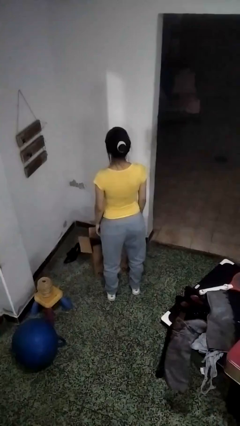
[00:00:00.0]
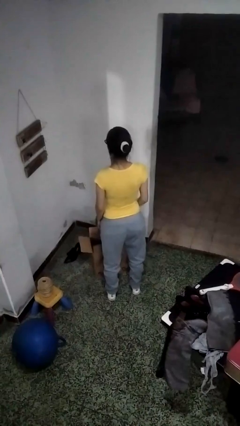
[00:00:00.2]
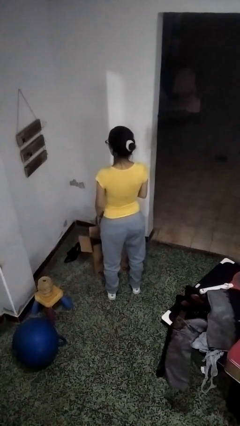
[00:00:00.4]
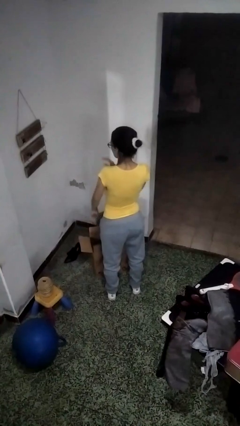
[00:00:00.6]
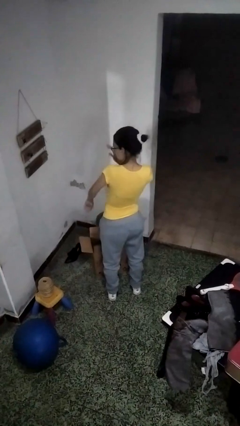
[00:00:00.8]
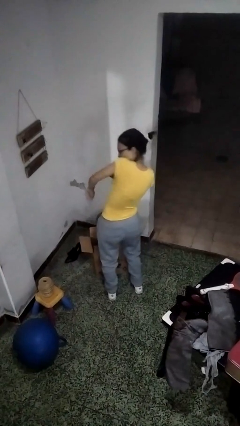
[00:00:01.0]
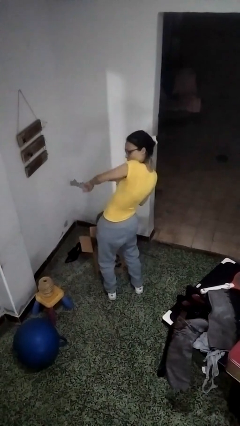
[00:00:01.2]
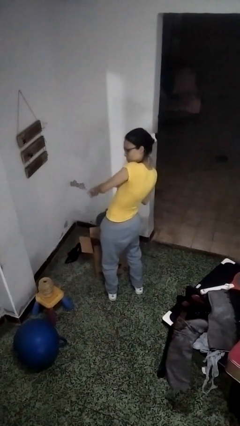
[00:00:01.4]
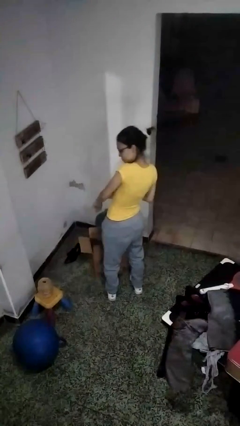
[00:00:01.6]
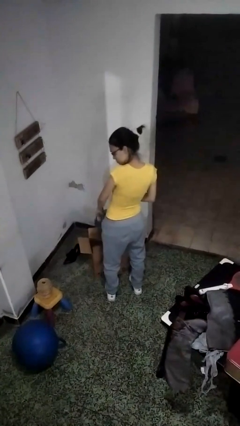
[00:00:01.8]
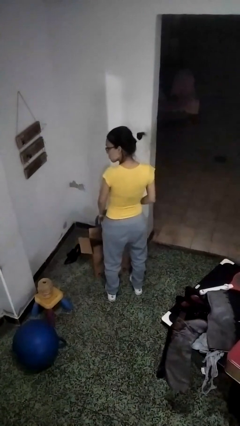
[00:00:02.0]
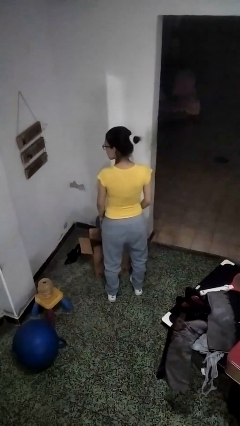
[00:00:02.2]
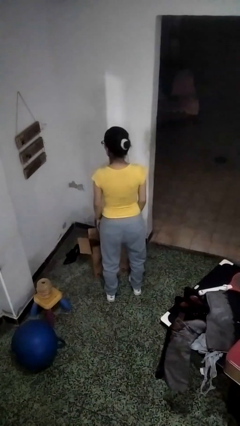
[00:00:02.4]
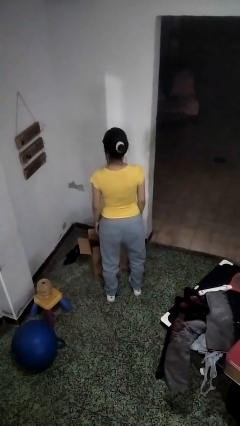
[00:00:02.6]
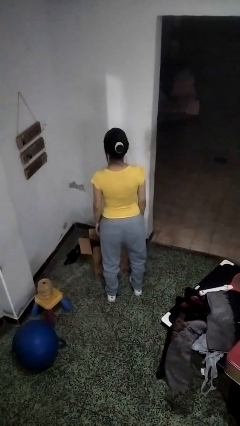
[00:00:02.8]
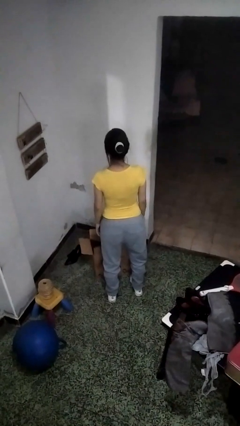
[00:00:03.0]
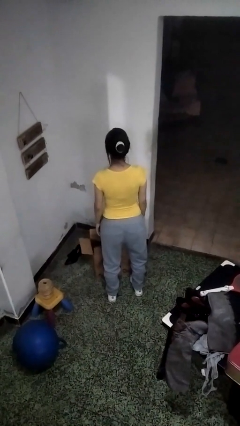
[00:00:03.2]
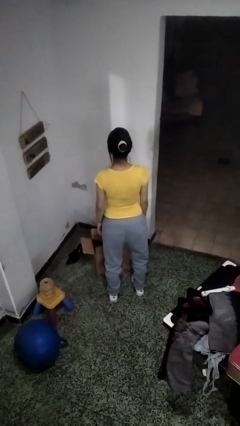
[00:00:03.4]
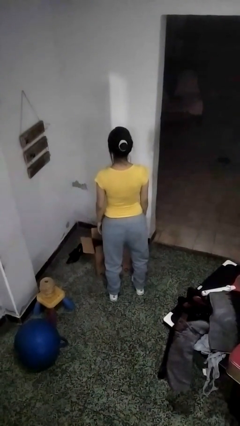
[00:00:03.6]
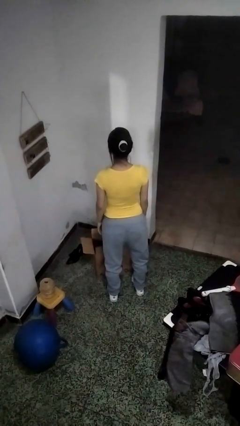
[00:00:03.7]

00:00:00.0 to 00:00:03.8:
person swats bug

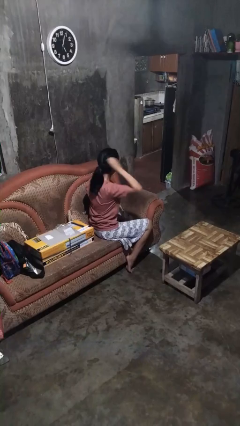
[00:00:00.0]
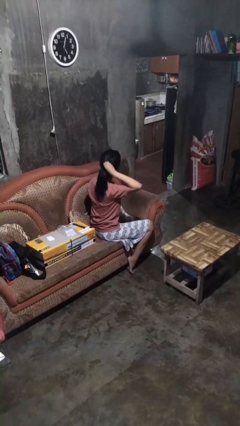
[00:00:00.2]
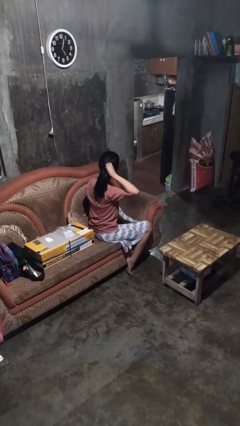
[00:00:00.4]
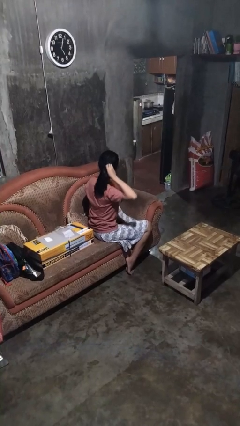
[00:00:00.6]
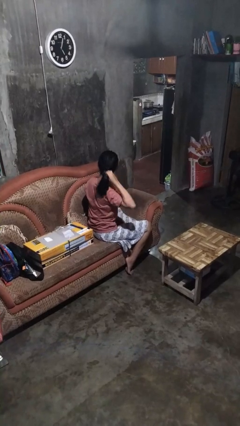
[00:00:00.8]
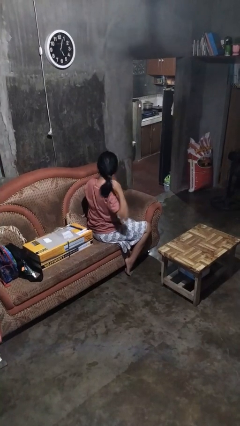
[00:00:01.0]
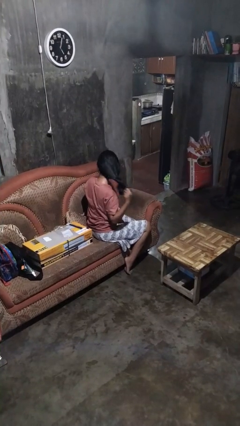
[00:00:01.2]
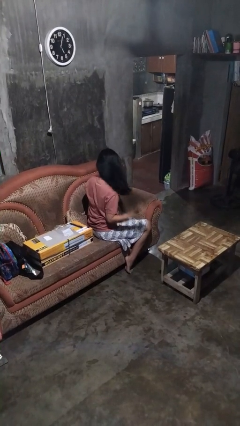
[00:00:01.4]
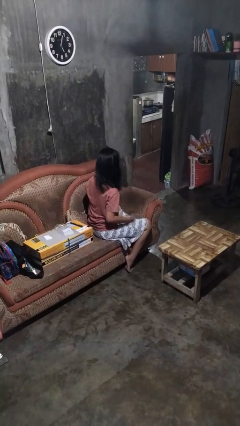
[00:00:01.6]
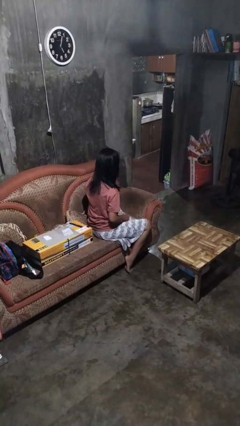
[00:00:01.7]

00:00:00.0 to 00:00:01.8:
person takes off hairtie

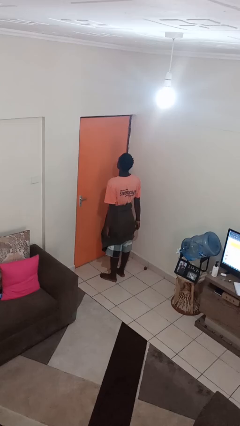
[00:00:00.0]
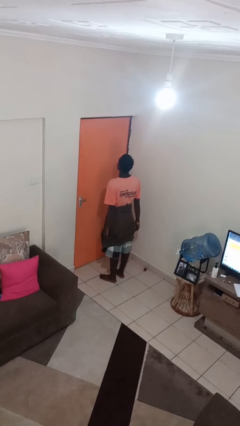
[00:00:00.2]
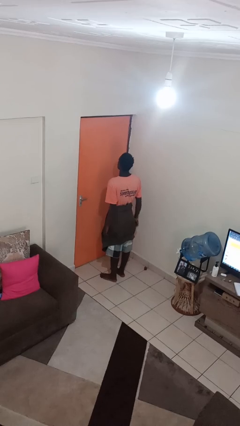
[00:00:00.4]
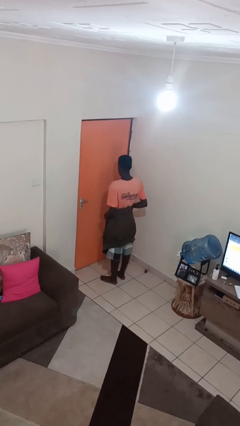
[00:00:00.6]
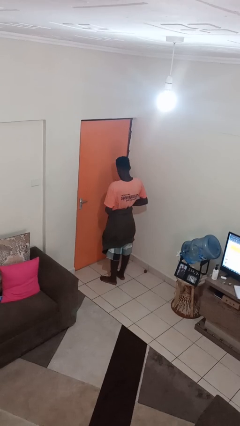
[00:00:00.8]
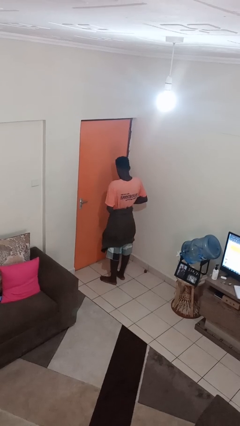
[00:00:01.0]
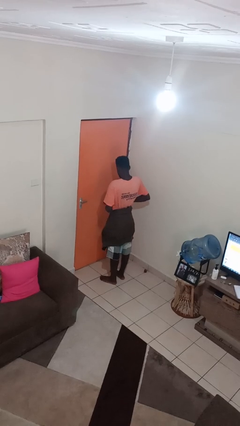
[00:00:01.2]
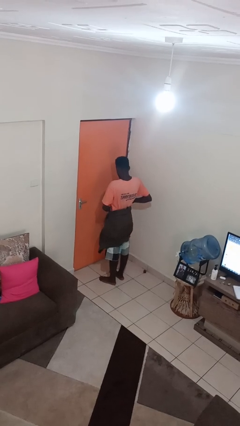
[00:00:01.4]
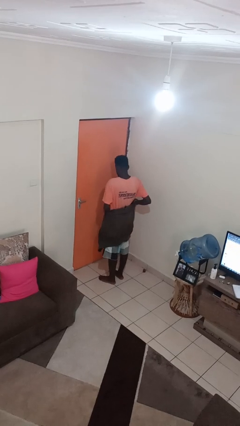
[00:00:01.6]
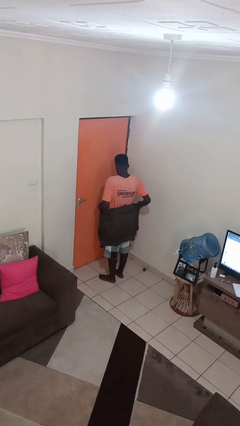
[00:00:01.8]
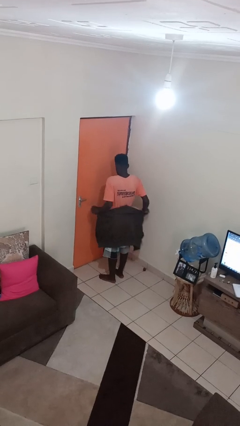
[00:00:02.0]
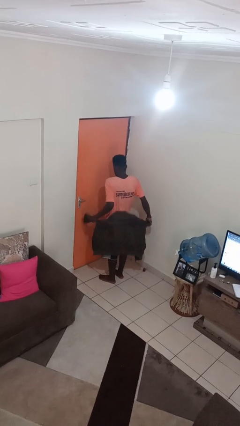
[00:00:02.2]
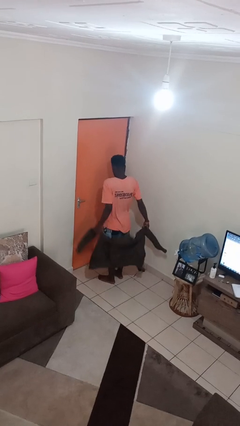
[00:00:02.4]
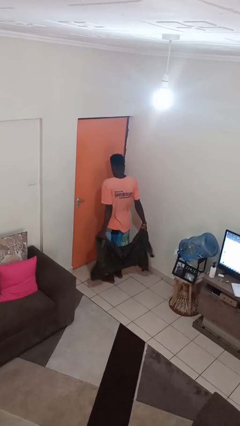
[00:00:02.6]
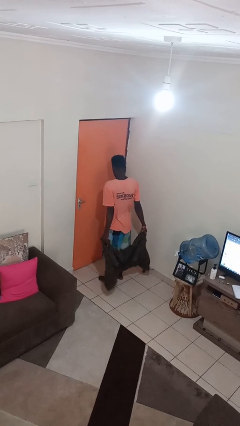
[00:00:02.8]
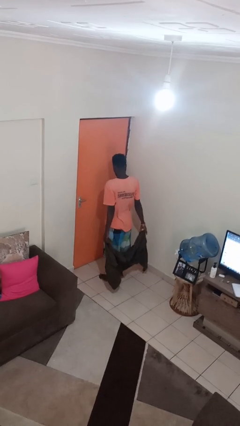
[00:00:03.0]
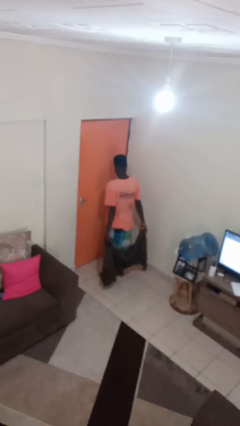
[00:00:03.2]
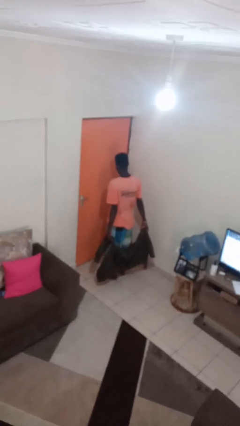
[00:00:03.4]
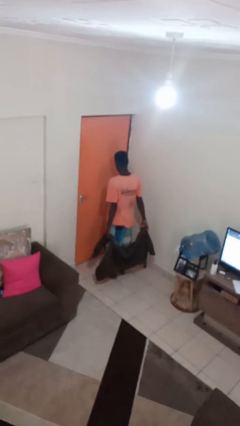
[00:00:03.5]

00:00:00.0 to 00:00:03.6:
person unties jacket around waist

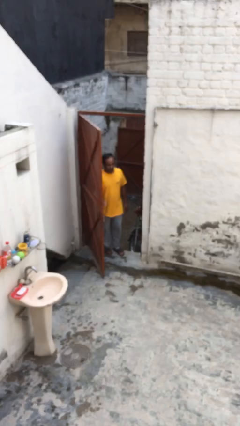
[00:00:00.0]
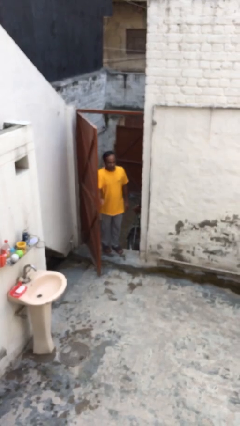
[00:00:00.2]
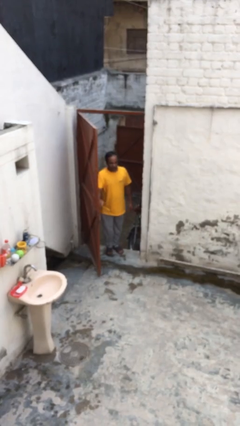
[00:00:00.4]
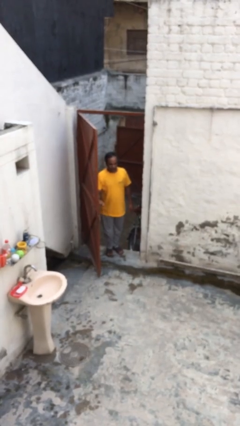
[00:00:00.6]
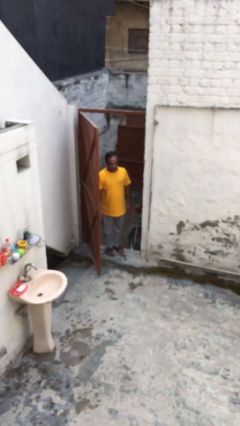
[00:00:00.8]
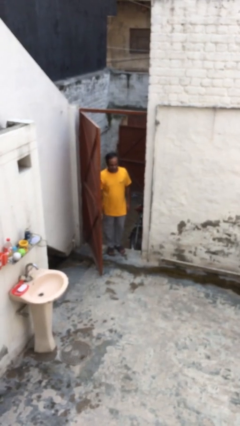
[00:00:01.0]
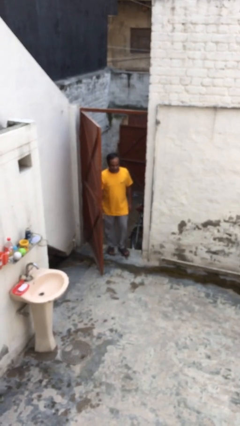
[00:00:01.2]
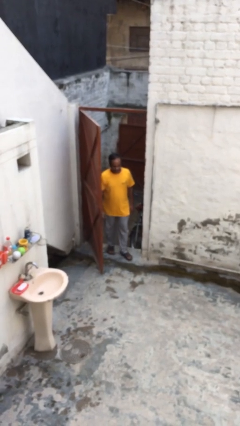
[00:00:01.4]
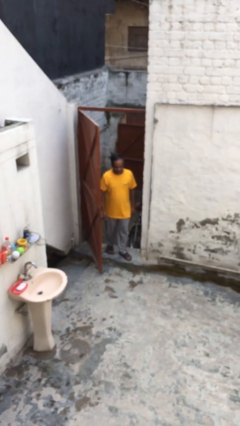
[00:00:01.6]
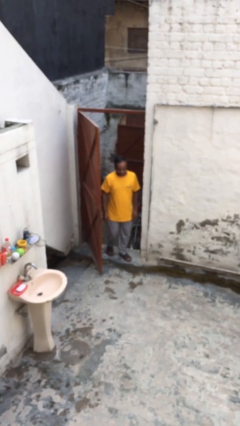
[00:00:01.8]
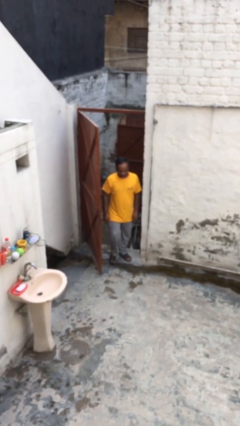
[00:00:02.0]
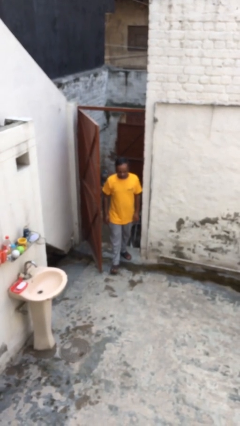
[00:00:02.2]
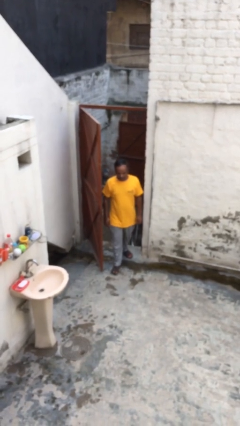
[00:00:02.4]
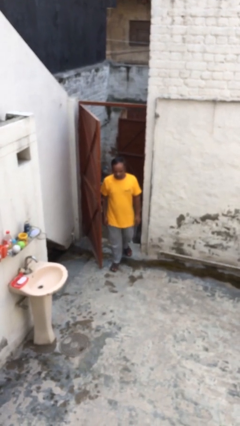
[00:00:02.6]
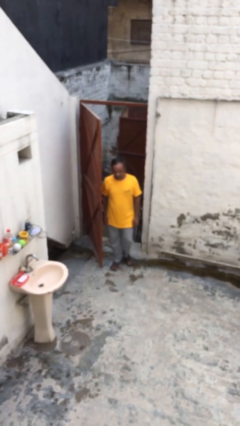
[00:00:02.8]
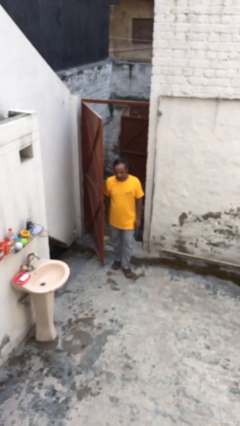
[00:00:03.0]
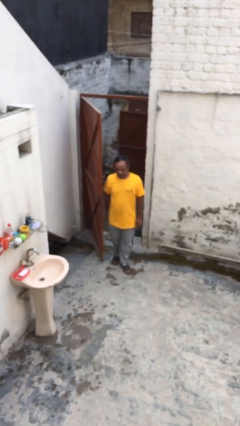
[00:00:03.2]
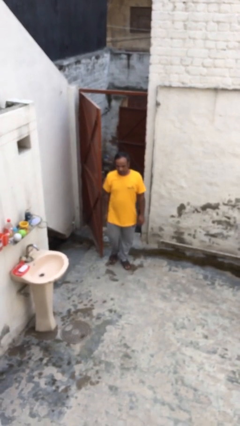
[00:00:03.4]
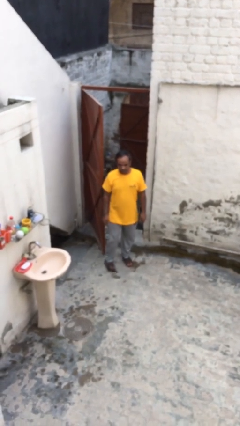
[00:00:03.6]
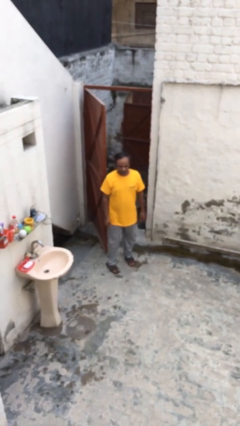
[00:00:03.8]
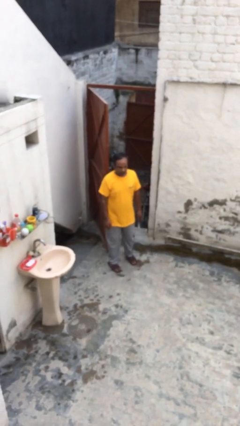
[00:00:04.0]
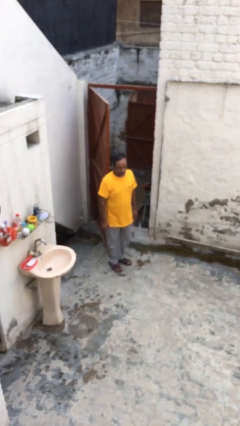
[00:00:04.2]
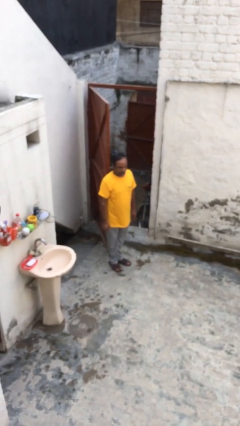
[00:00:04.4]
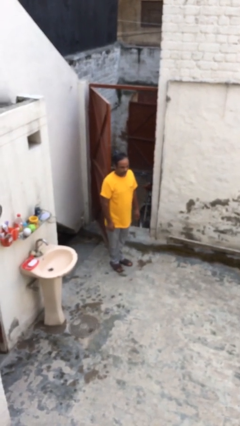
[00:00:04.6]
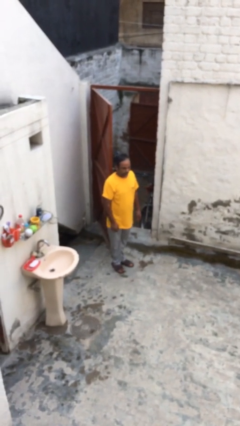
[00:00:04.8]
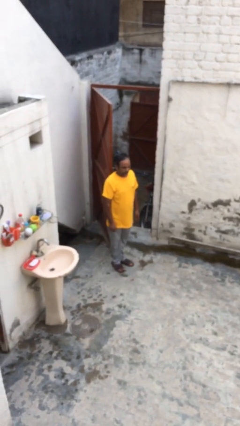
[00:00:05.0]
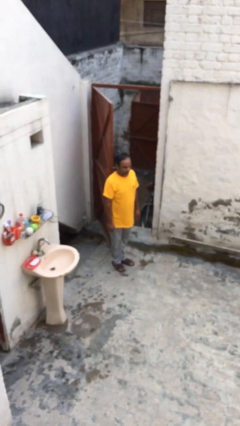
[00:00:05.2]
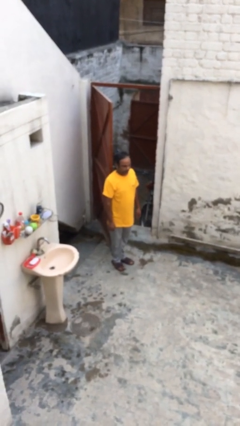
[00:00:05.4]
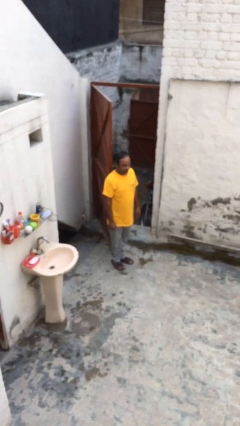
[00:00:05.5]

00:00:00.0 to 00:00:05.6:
person enters scene through structure

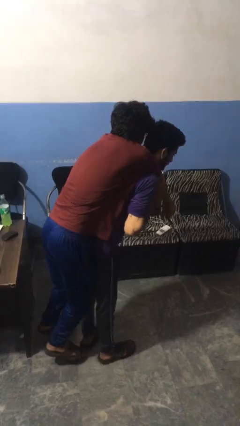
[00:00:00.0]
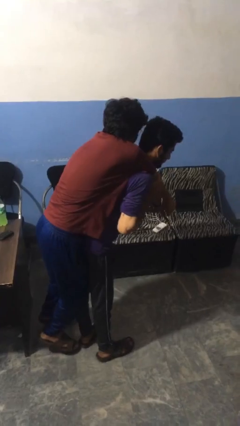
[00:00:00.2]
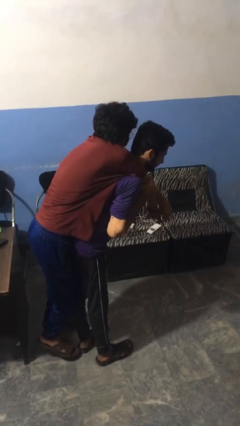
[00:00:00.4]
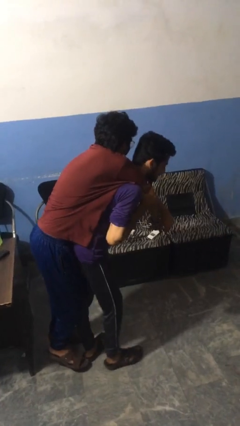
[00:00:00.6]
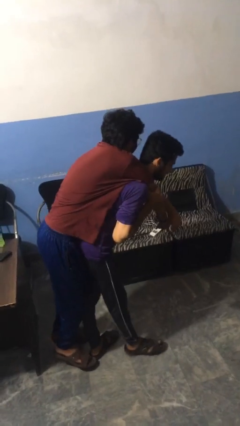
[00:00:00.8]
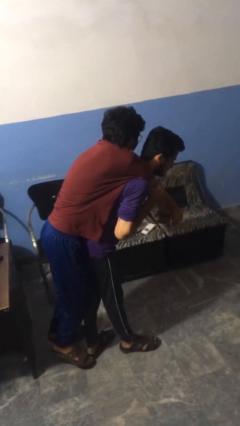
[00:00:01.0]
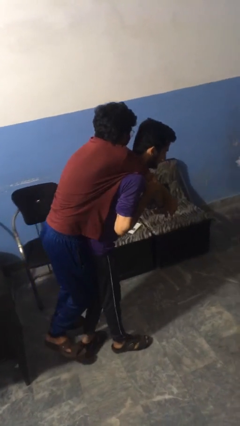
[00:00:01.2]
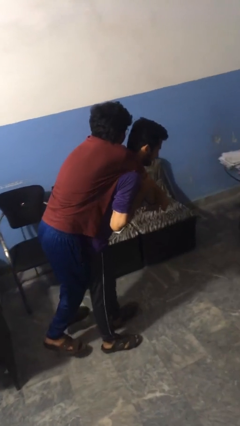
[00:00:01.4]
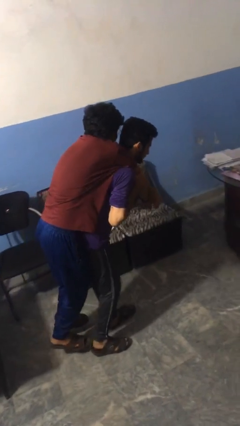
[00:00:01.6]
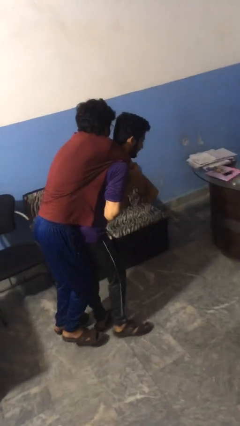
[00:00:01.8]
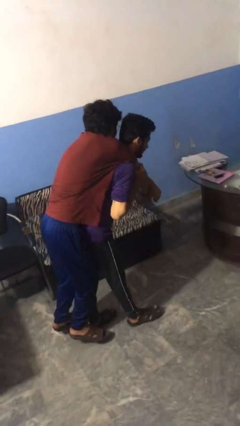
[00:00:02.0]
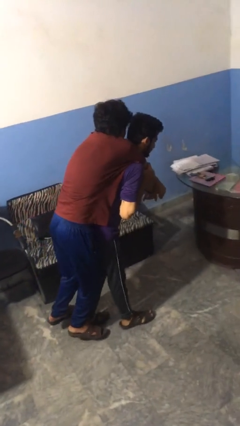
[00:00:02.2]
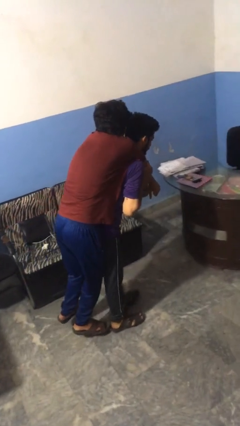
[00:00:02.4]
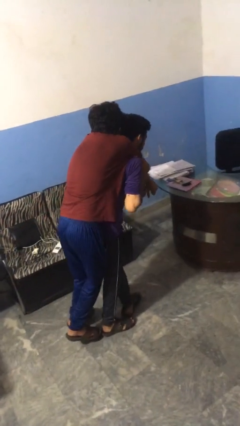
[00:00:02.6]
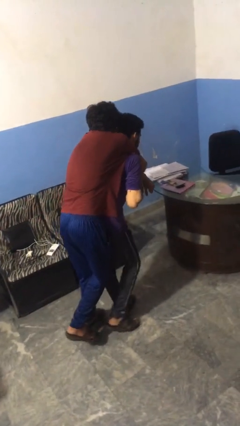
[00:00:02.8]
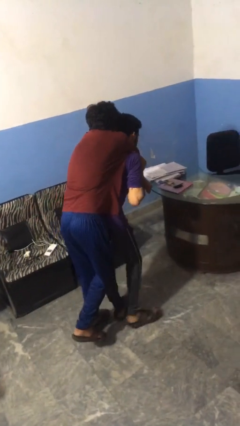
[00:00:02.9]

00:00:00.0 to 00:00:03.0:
person carries person on back
